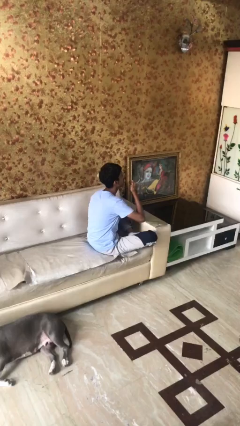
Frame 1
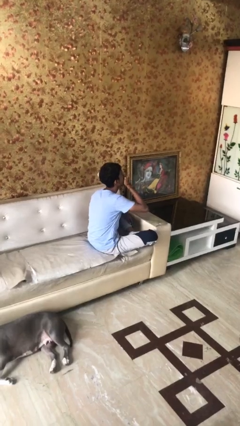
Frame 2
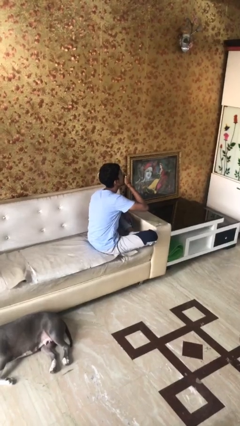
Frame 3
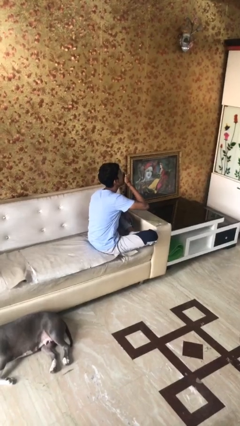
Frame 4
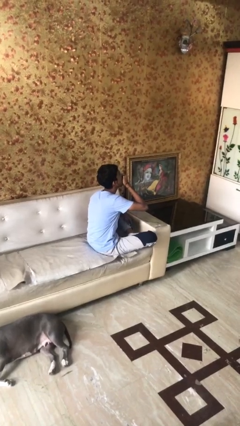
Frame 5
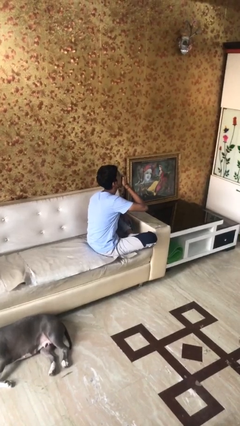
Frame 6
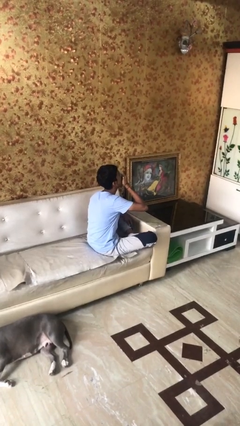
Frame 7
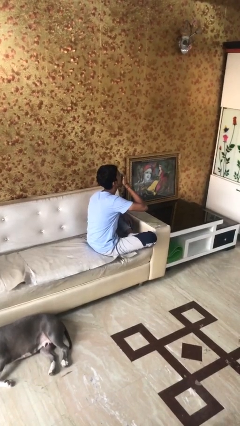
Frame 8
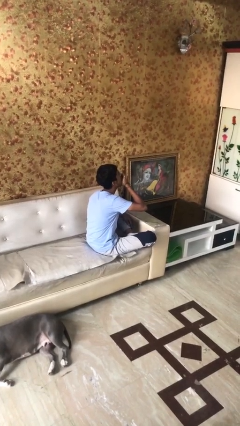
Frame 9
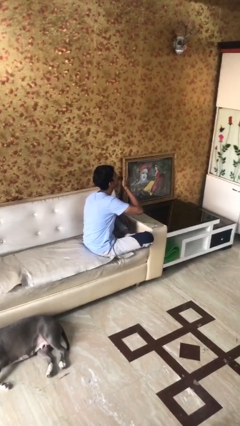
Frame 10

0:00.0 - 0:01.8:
person yawns

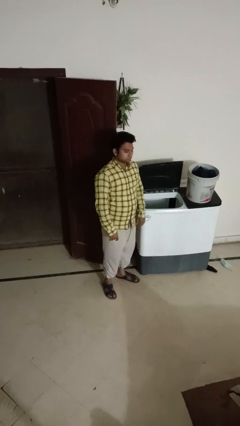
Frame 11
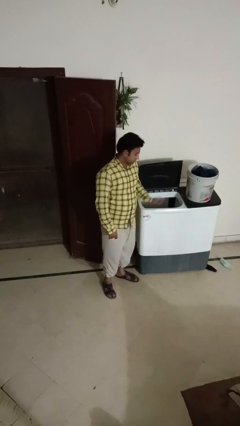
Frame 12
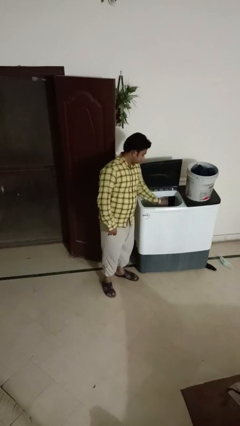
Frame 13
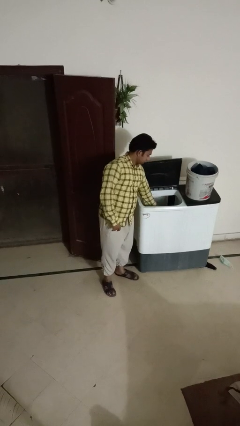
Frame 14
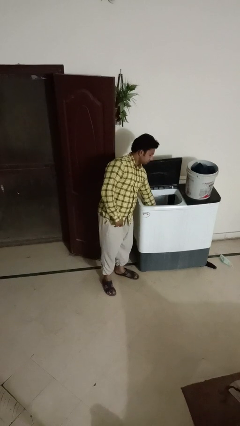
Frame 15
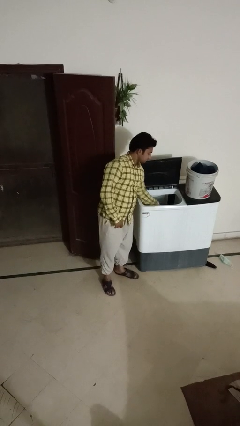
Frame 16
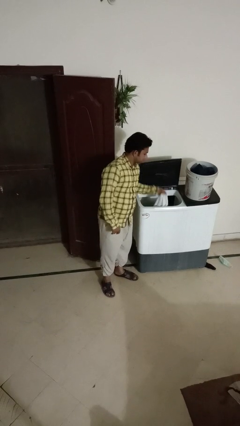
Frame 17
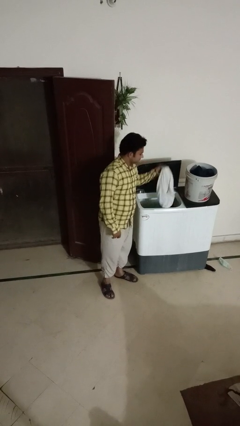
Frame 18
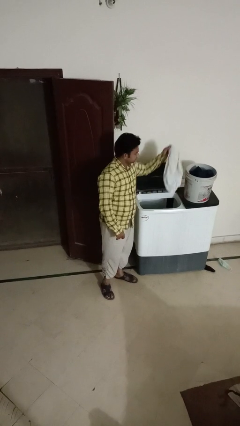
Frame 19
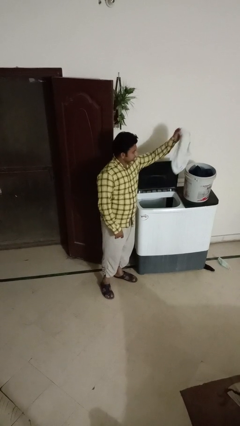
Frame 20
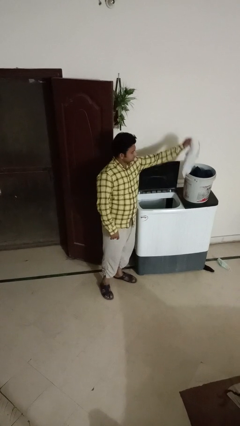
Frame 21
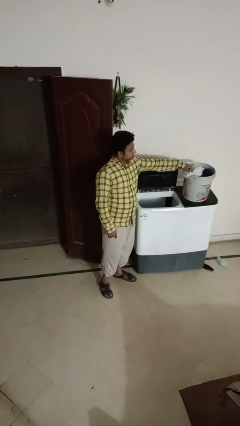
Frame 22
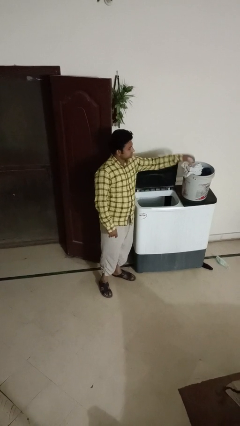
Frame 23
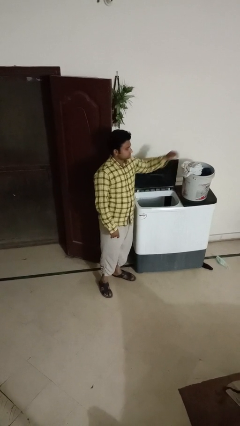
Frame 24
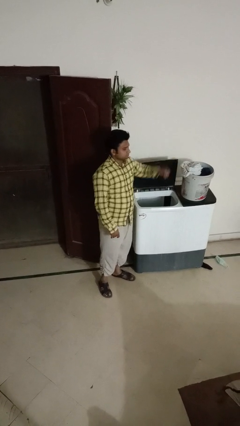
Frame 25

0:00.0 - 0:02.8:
person unloads clotheswasher

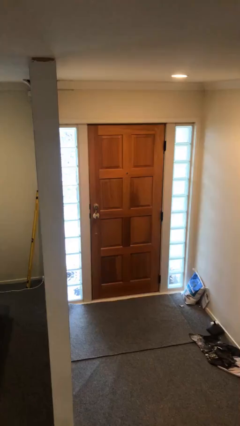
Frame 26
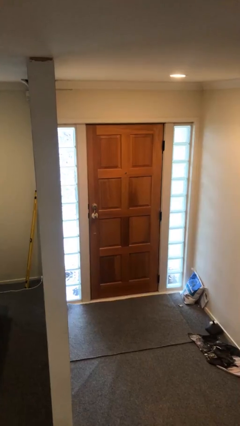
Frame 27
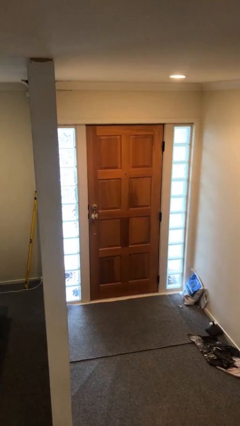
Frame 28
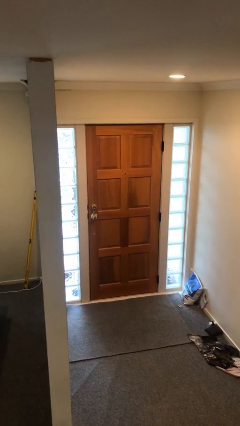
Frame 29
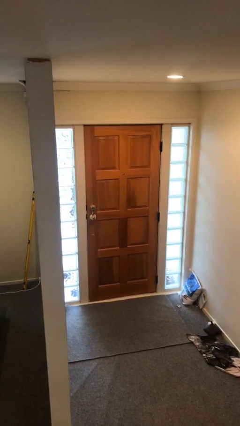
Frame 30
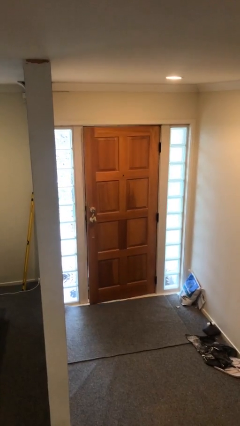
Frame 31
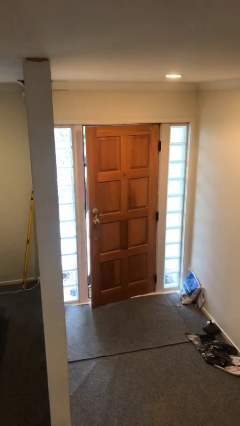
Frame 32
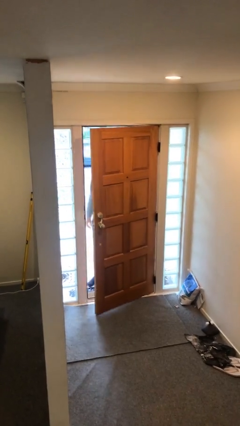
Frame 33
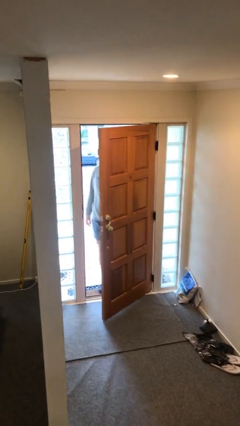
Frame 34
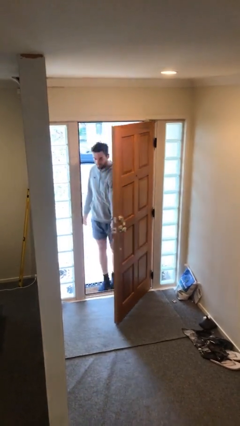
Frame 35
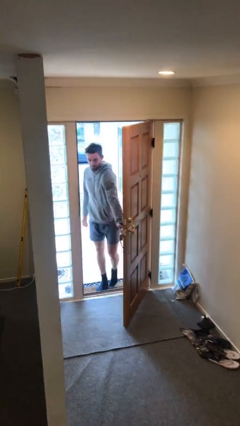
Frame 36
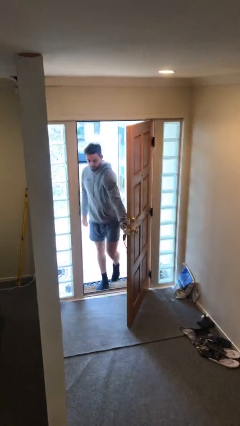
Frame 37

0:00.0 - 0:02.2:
person opens facility door

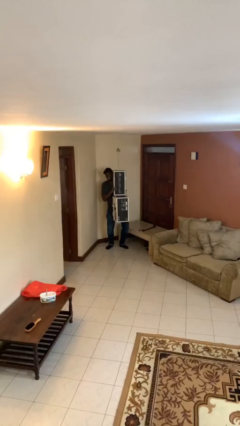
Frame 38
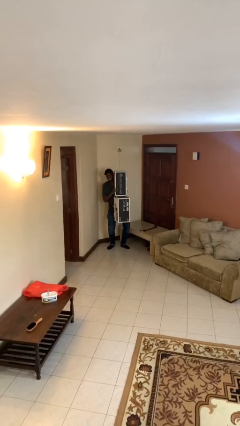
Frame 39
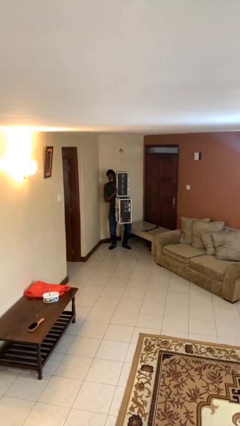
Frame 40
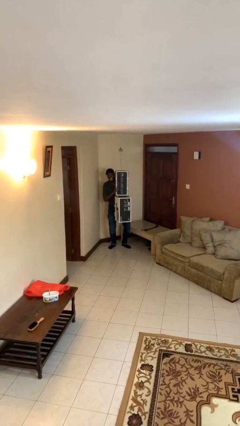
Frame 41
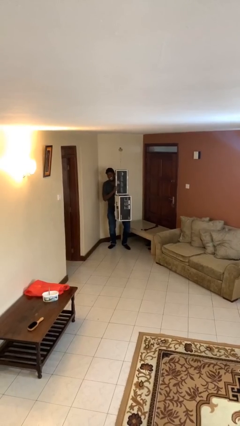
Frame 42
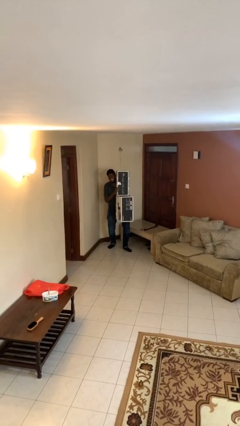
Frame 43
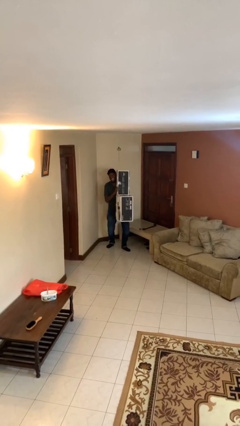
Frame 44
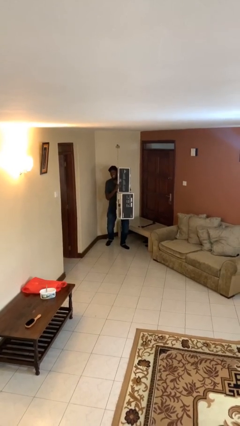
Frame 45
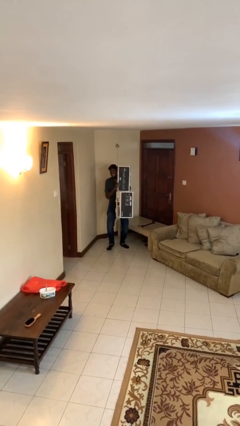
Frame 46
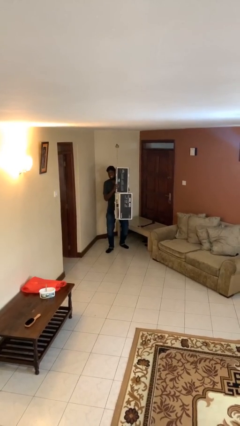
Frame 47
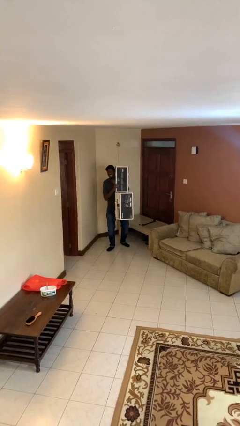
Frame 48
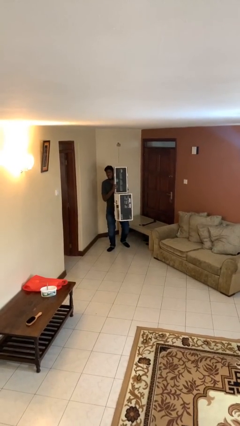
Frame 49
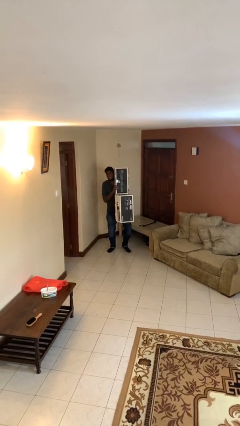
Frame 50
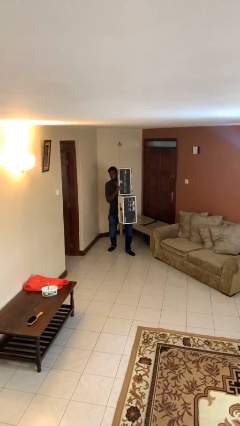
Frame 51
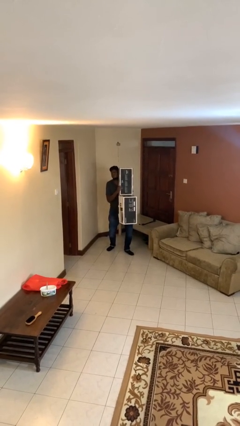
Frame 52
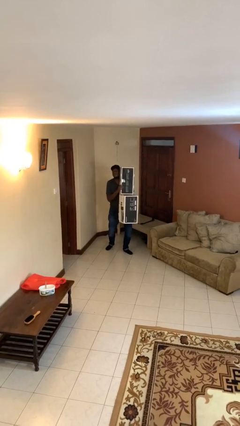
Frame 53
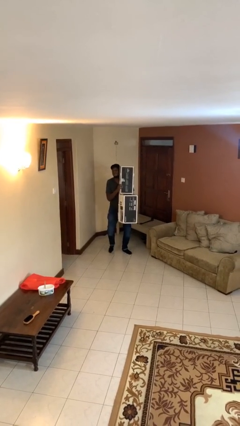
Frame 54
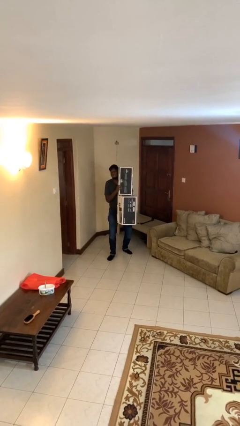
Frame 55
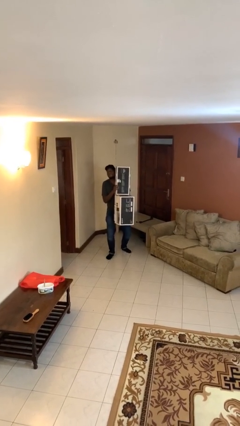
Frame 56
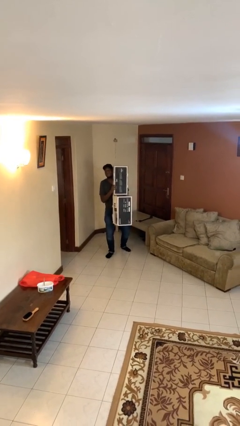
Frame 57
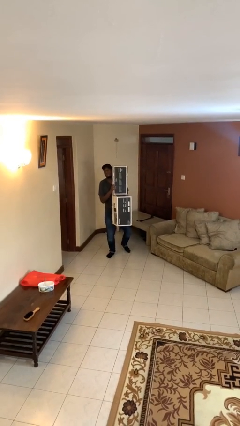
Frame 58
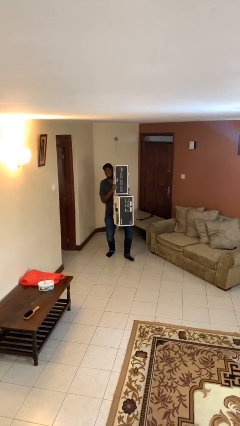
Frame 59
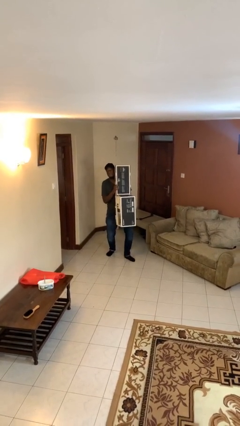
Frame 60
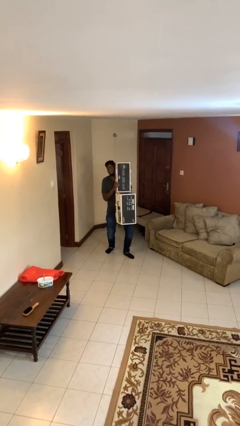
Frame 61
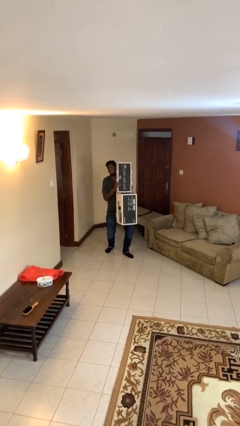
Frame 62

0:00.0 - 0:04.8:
person carries heavy object

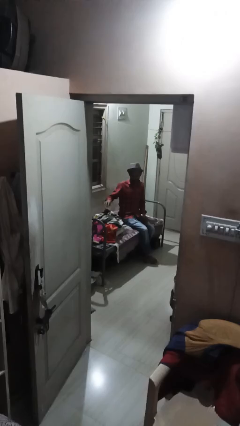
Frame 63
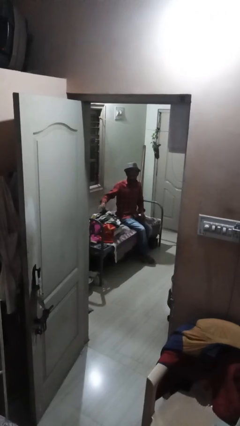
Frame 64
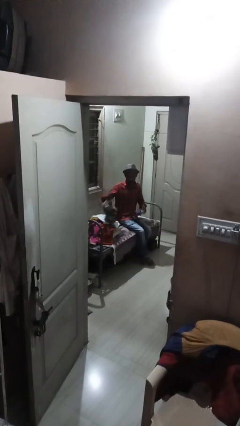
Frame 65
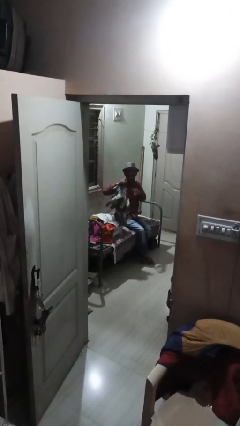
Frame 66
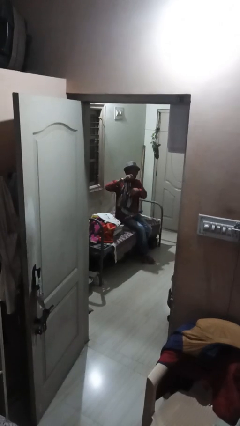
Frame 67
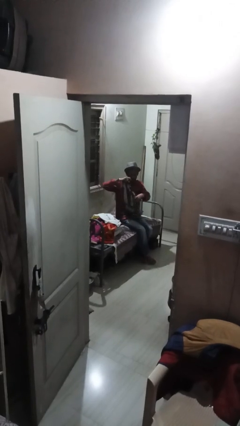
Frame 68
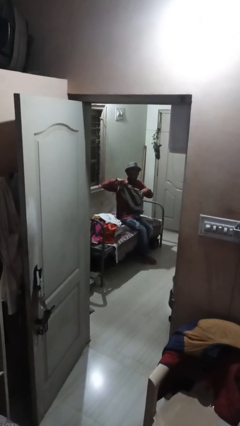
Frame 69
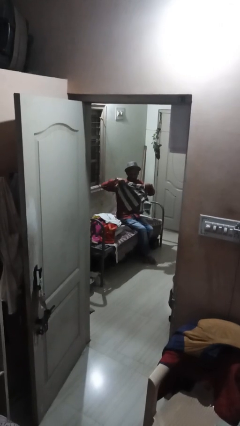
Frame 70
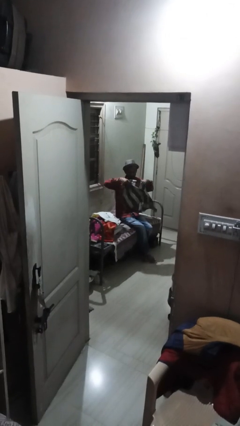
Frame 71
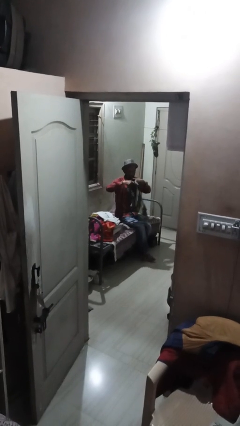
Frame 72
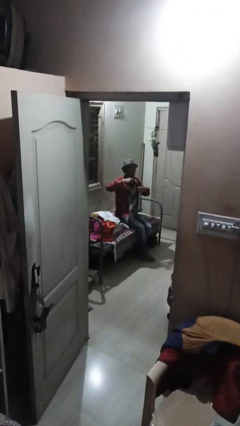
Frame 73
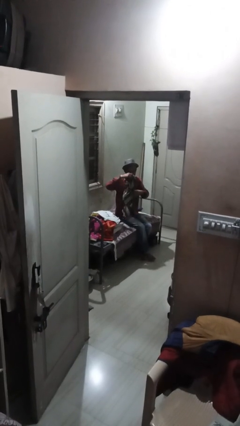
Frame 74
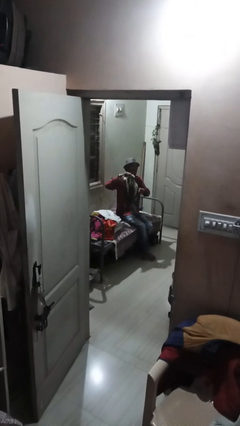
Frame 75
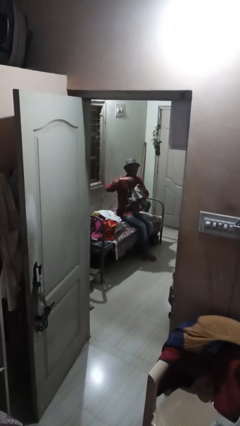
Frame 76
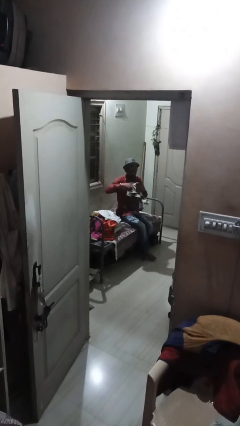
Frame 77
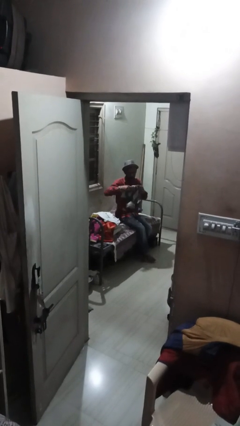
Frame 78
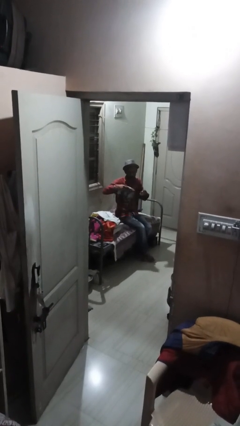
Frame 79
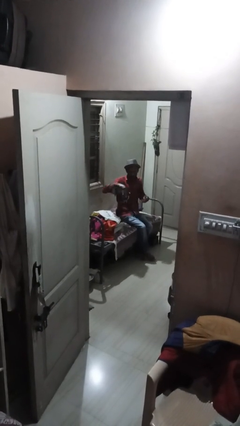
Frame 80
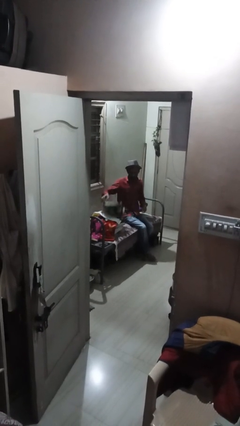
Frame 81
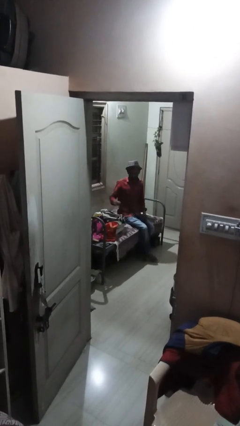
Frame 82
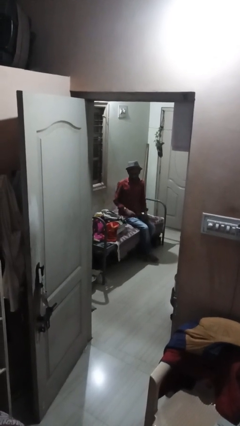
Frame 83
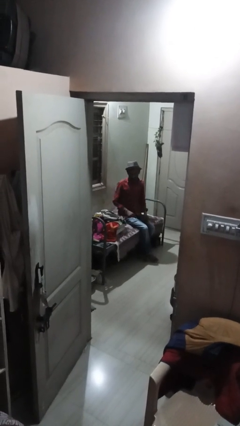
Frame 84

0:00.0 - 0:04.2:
person folds shirt

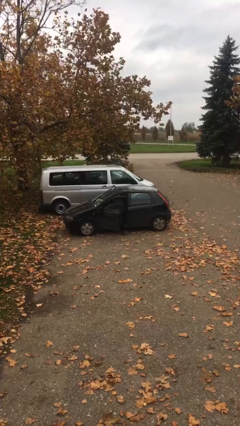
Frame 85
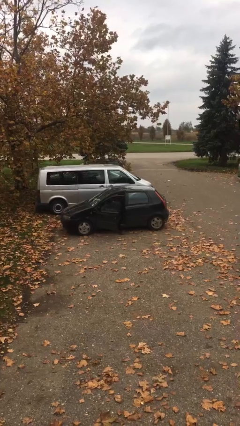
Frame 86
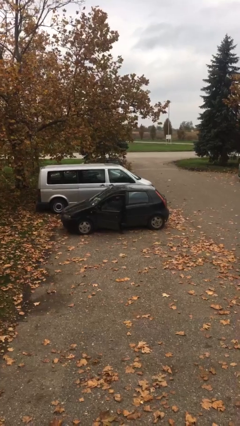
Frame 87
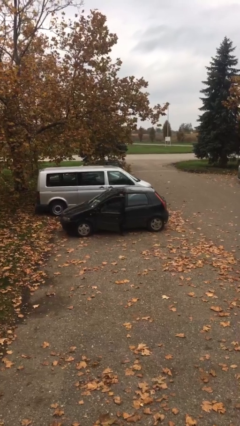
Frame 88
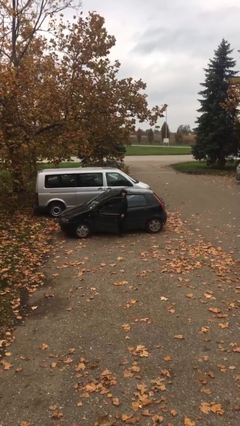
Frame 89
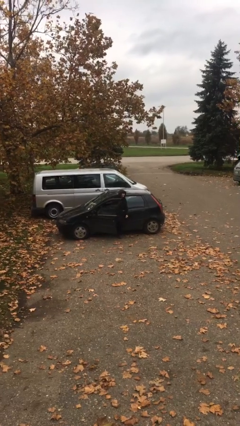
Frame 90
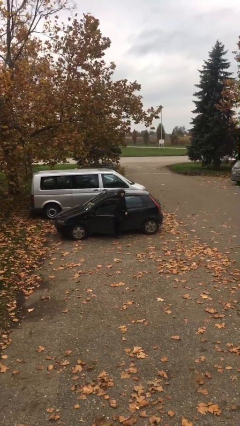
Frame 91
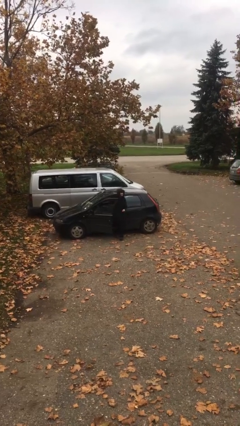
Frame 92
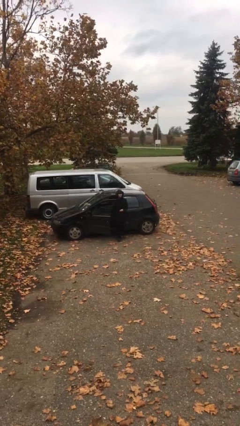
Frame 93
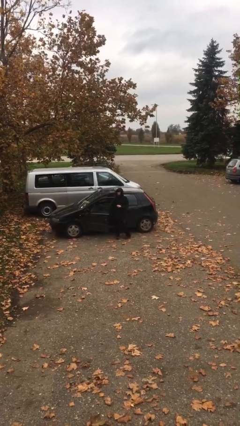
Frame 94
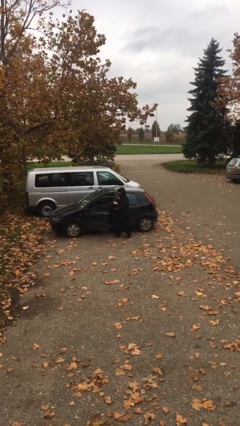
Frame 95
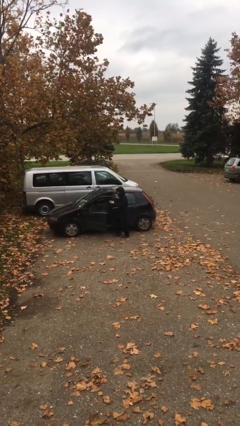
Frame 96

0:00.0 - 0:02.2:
person exits car
